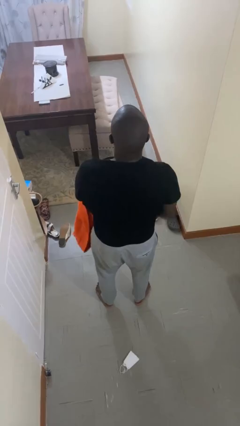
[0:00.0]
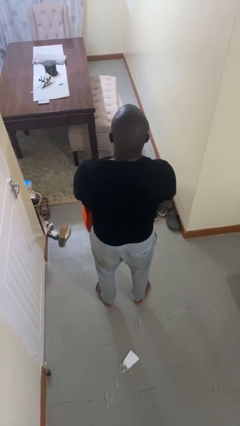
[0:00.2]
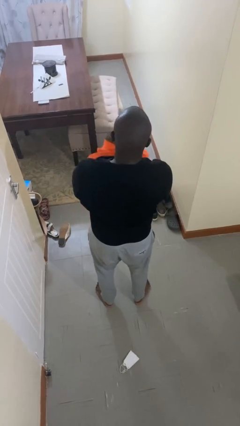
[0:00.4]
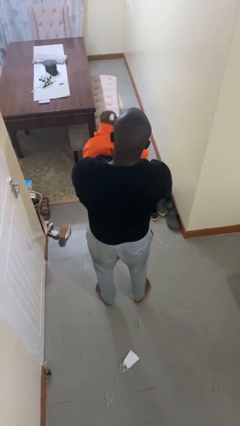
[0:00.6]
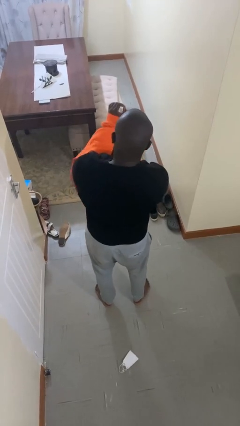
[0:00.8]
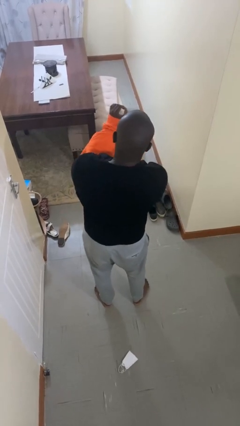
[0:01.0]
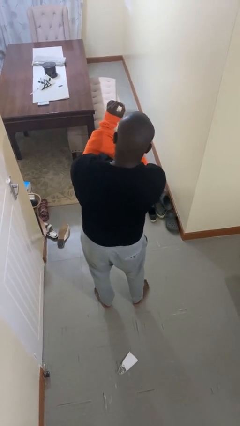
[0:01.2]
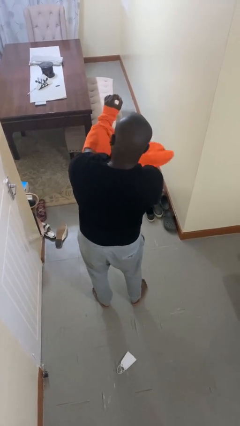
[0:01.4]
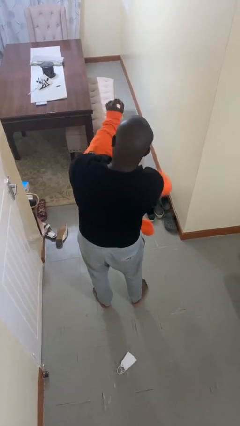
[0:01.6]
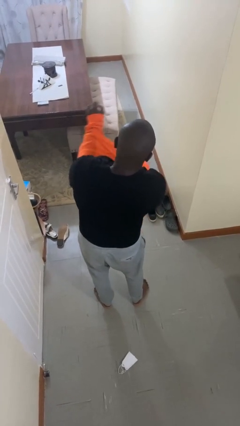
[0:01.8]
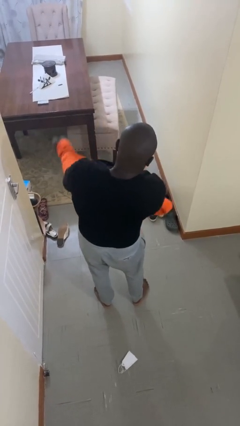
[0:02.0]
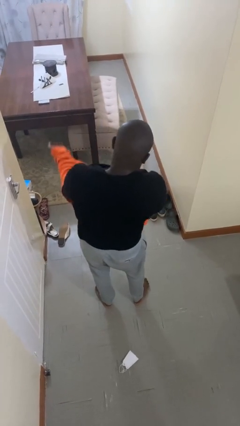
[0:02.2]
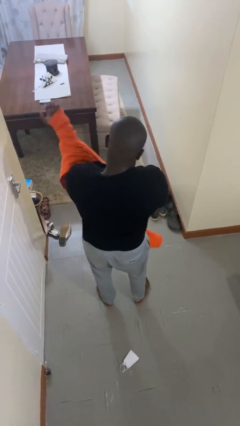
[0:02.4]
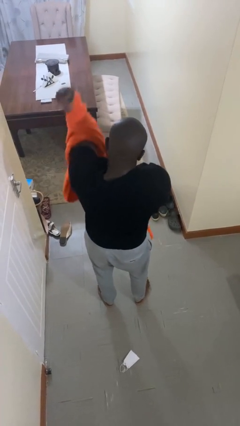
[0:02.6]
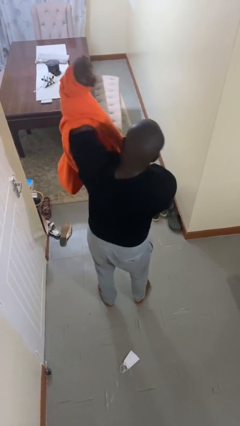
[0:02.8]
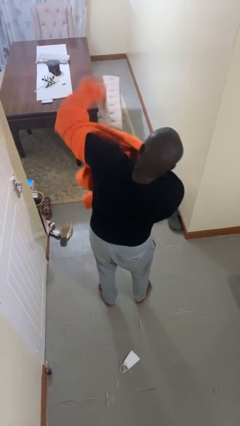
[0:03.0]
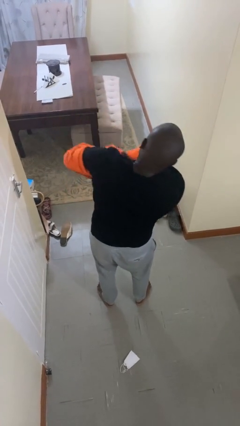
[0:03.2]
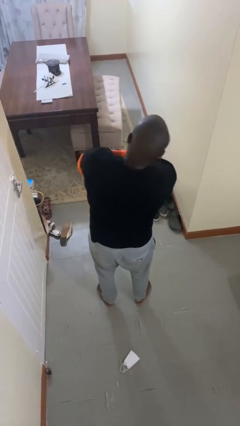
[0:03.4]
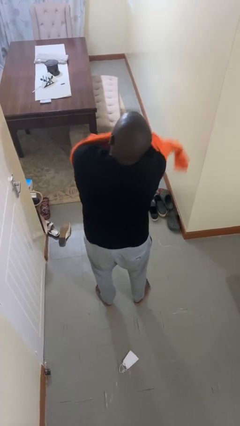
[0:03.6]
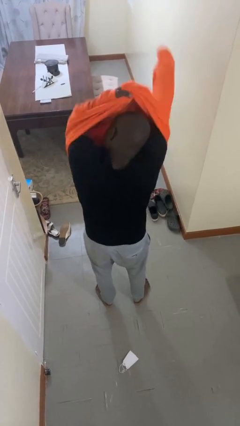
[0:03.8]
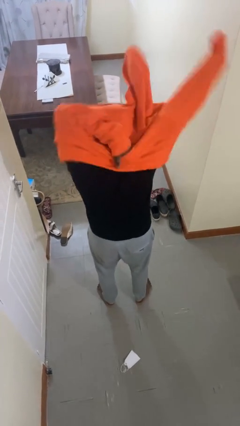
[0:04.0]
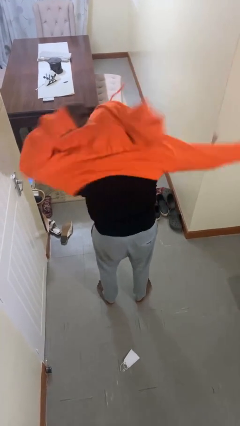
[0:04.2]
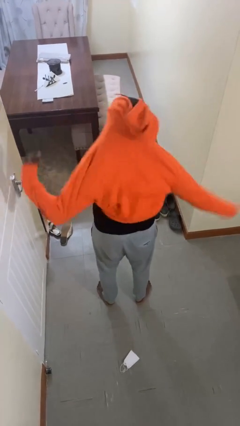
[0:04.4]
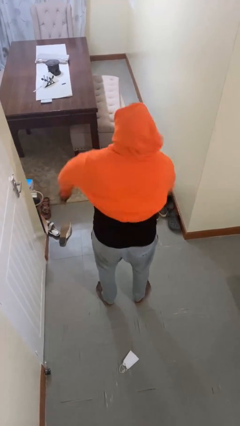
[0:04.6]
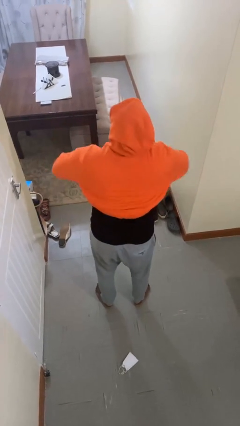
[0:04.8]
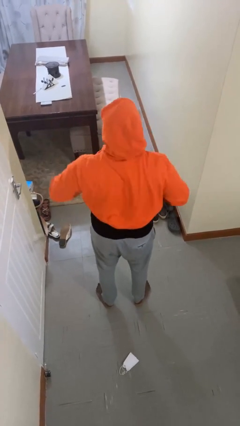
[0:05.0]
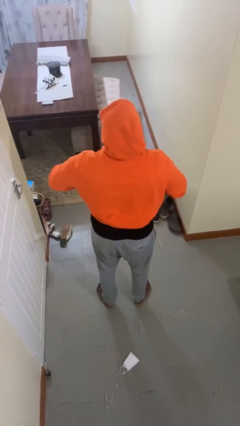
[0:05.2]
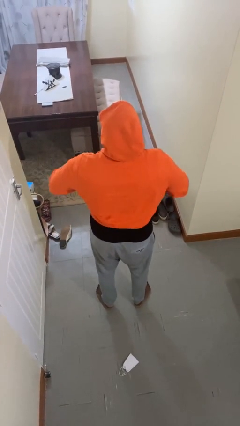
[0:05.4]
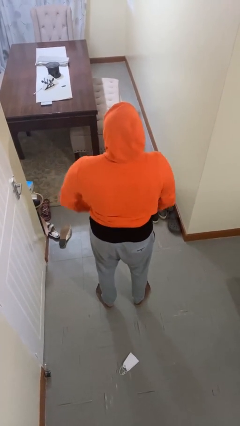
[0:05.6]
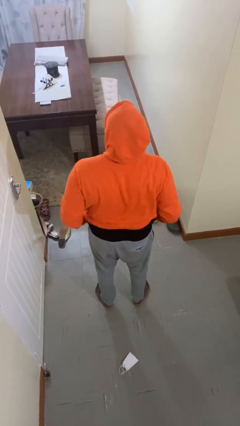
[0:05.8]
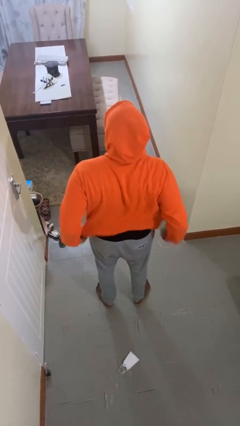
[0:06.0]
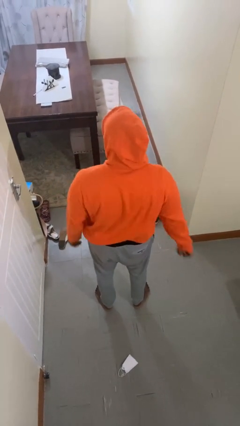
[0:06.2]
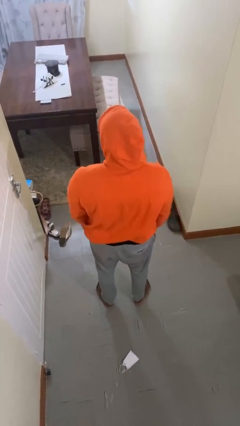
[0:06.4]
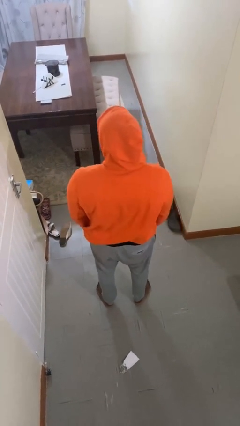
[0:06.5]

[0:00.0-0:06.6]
person puts on hoodie

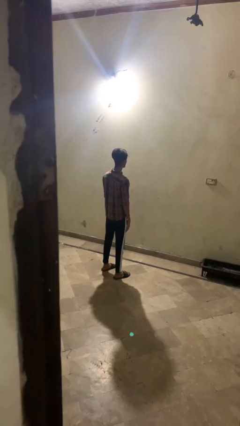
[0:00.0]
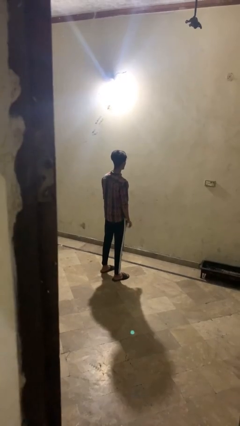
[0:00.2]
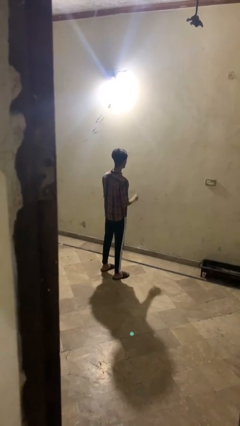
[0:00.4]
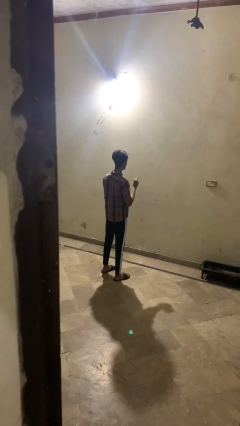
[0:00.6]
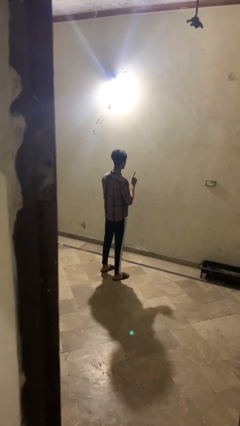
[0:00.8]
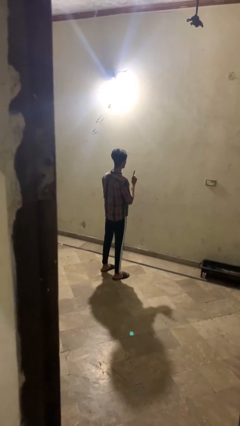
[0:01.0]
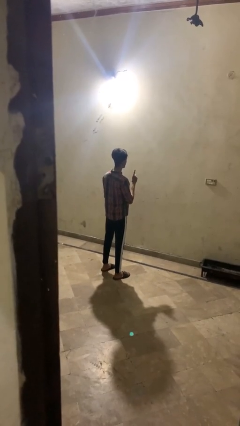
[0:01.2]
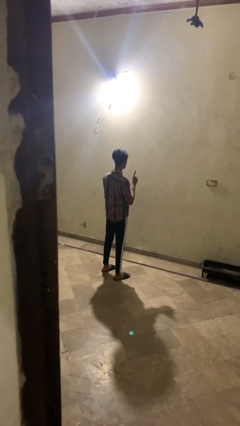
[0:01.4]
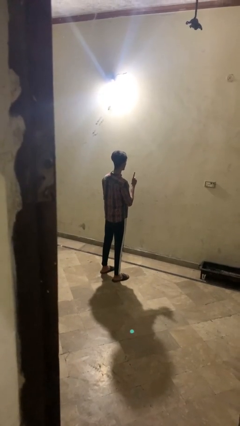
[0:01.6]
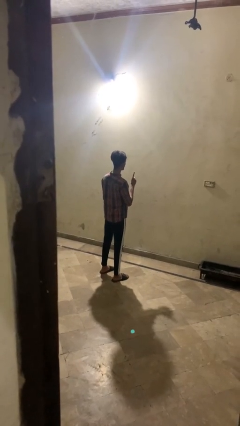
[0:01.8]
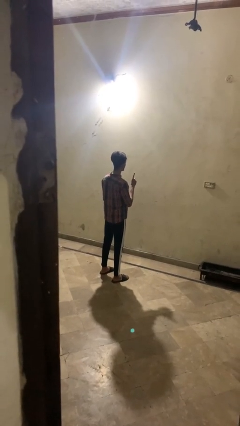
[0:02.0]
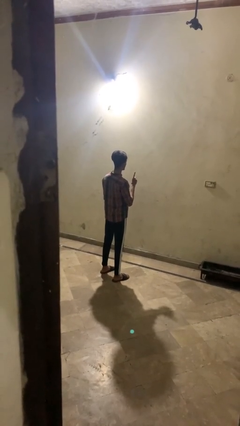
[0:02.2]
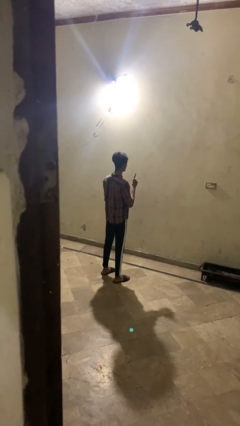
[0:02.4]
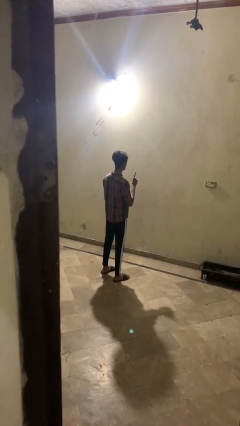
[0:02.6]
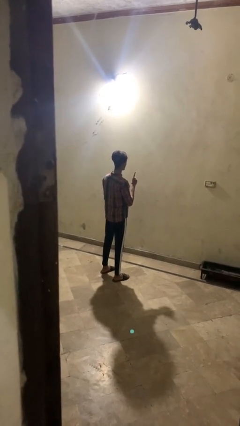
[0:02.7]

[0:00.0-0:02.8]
person gestures number one

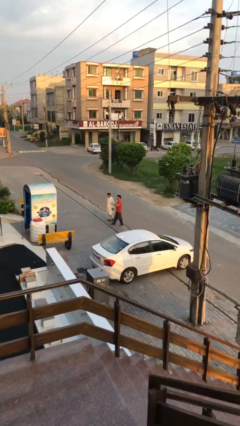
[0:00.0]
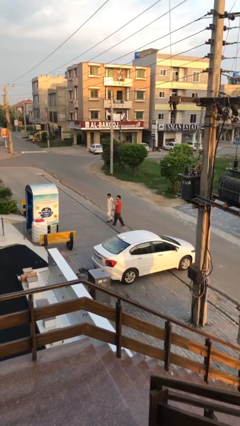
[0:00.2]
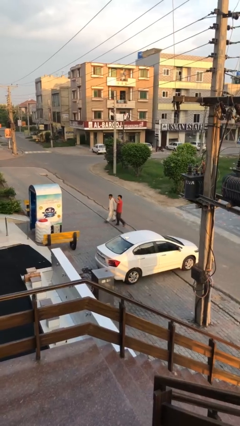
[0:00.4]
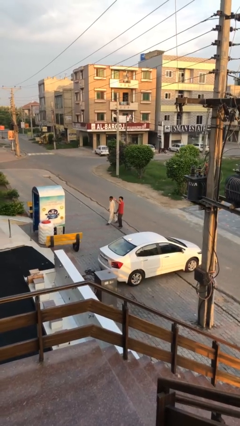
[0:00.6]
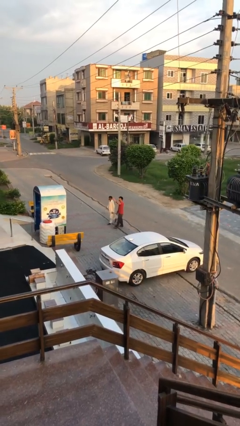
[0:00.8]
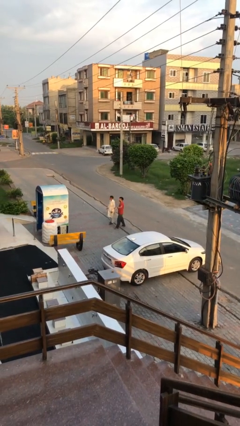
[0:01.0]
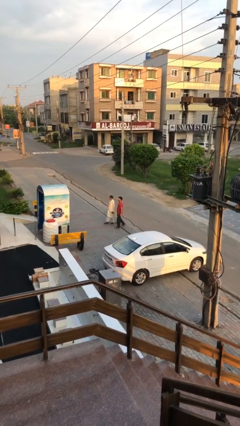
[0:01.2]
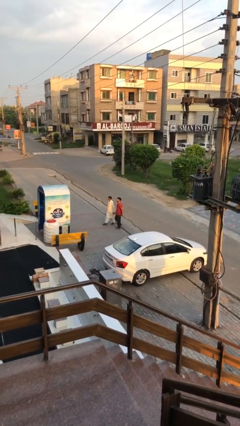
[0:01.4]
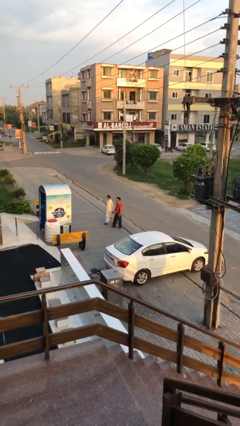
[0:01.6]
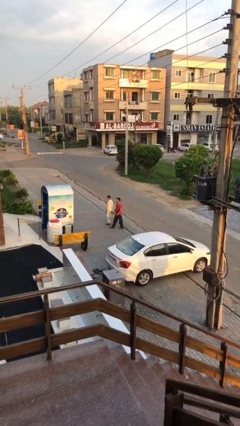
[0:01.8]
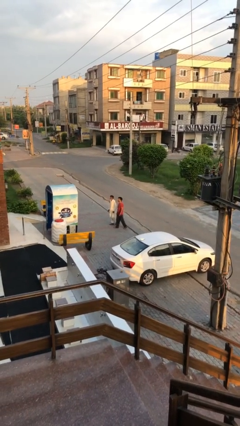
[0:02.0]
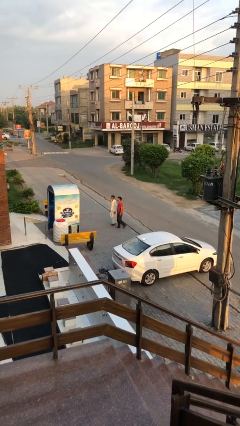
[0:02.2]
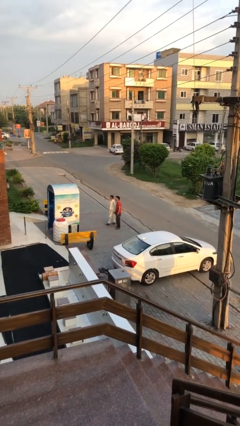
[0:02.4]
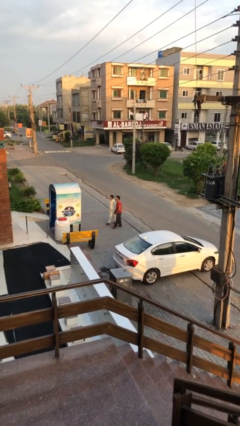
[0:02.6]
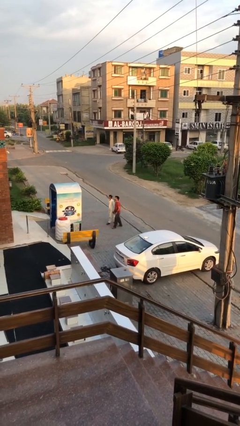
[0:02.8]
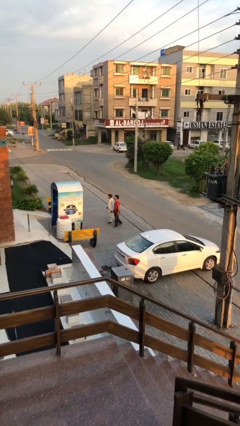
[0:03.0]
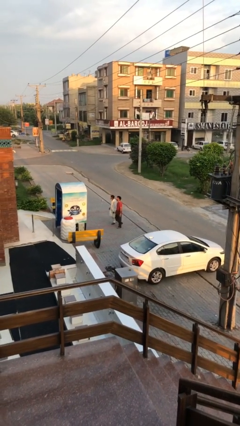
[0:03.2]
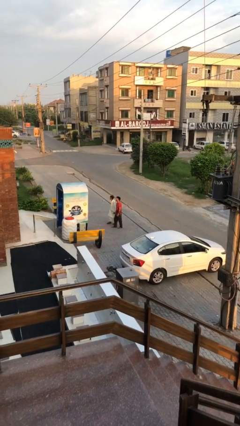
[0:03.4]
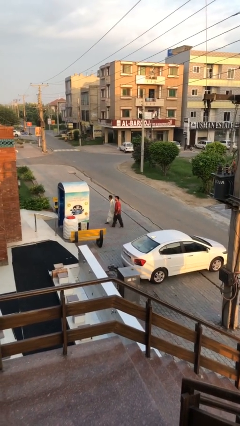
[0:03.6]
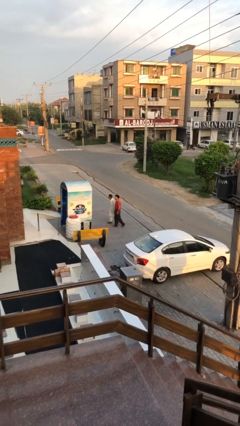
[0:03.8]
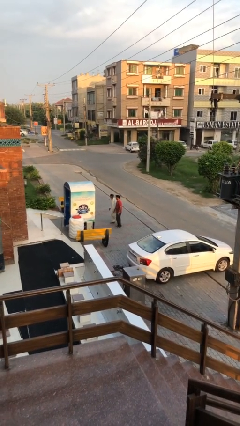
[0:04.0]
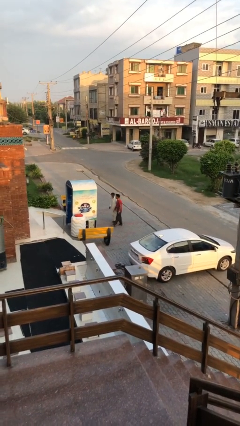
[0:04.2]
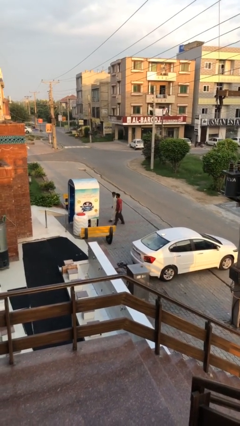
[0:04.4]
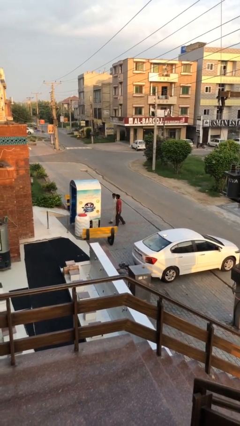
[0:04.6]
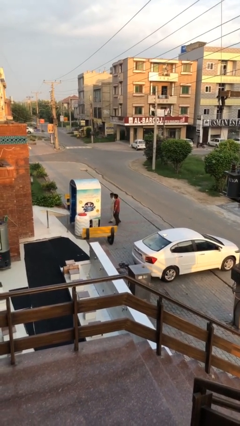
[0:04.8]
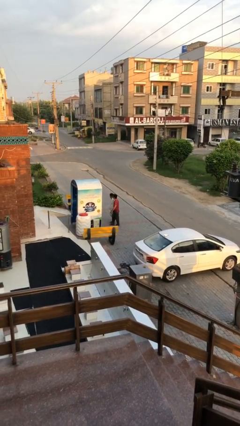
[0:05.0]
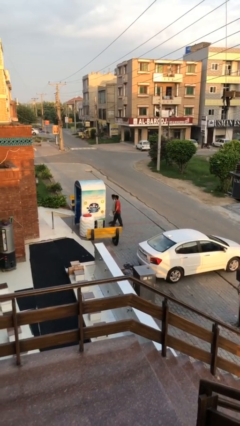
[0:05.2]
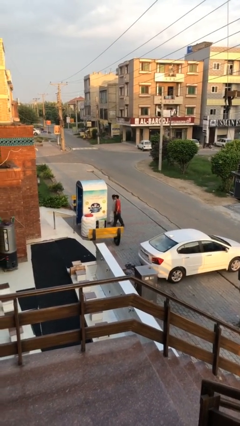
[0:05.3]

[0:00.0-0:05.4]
person talks to person

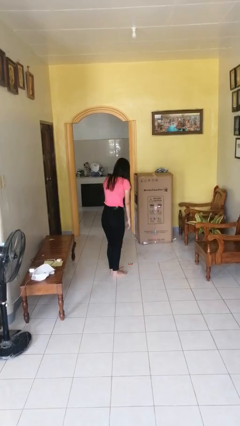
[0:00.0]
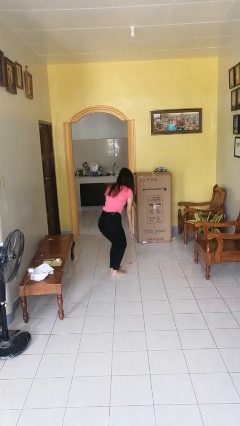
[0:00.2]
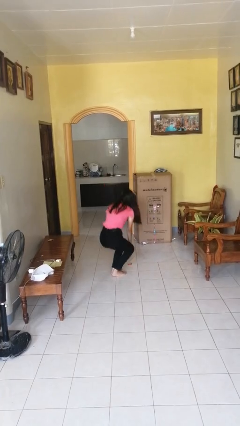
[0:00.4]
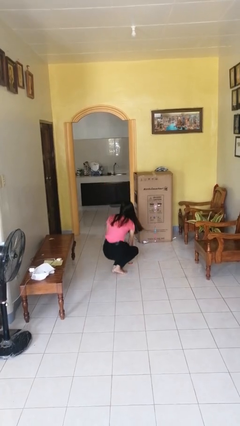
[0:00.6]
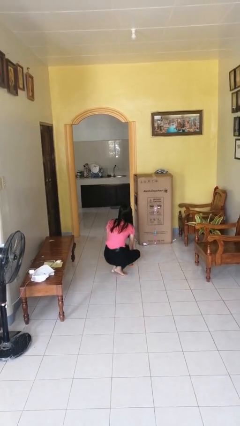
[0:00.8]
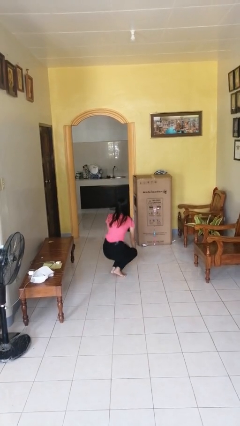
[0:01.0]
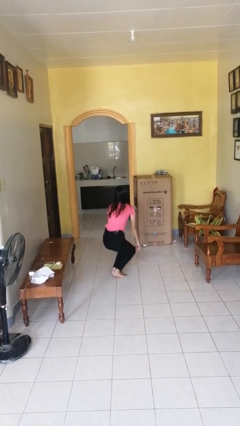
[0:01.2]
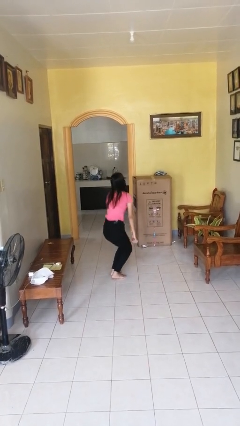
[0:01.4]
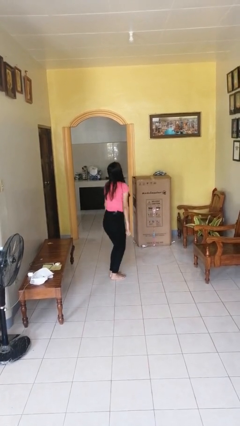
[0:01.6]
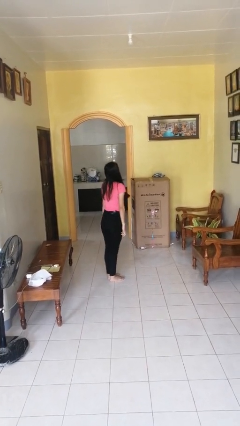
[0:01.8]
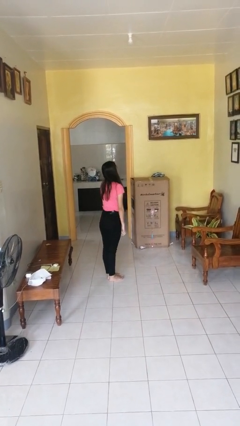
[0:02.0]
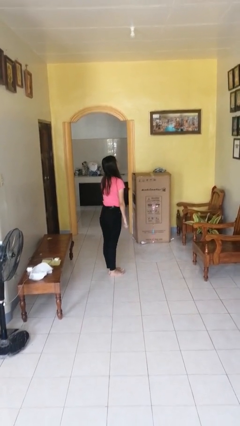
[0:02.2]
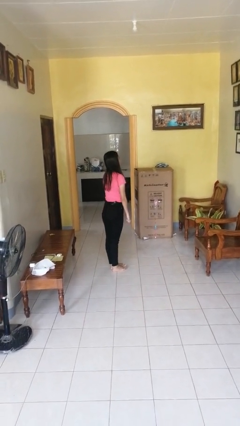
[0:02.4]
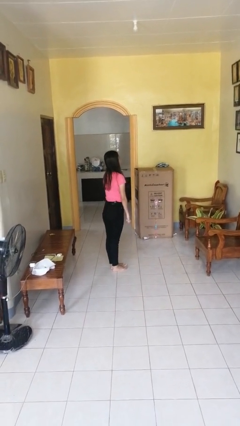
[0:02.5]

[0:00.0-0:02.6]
person picks up object from floor

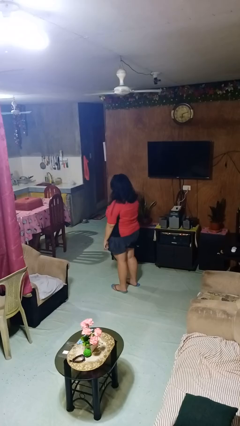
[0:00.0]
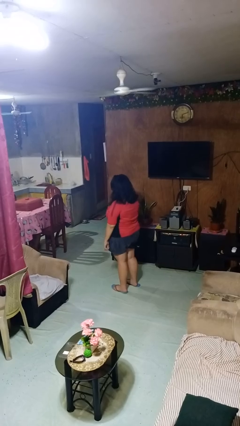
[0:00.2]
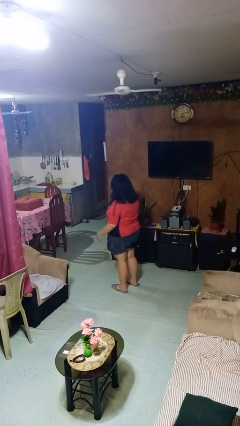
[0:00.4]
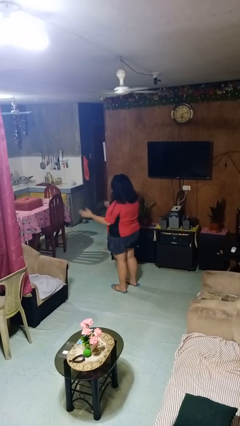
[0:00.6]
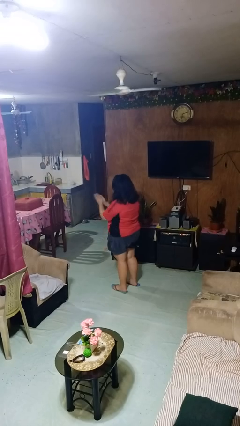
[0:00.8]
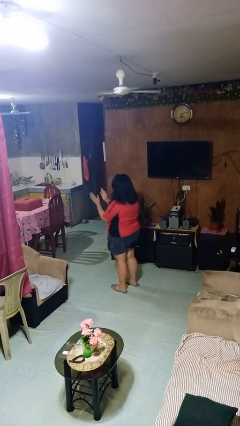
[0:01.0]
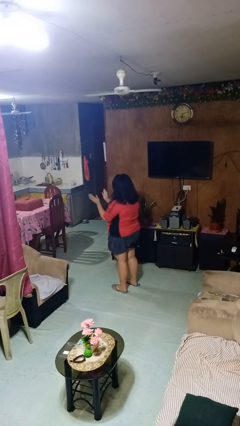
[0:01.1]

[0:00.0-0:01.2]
person claps hands
